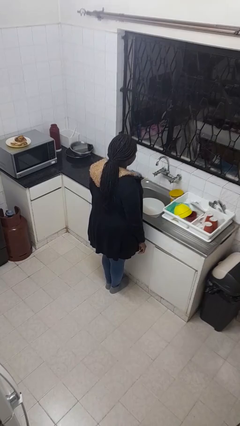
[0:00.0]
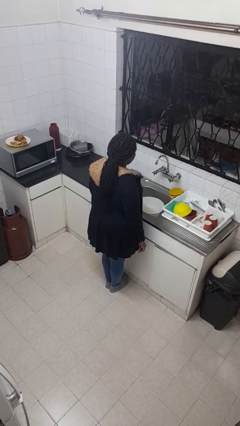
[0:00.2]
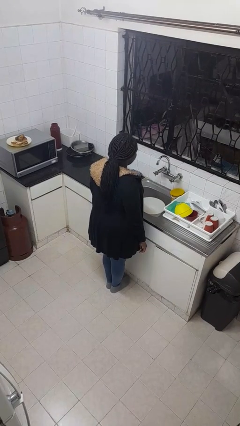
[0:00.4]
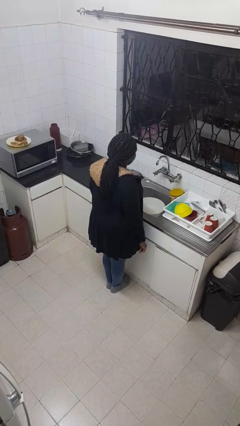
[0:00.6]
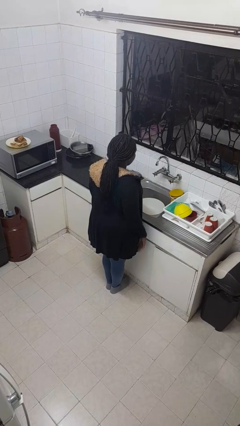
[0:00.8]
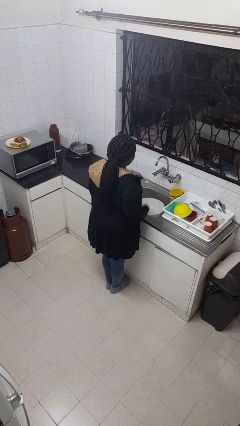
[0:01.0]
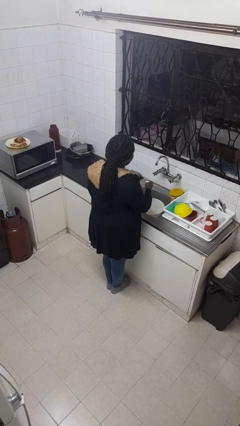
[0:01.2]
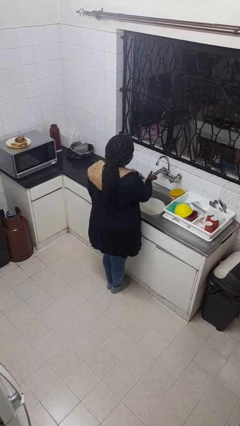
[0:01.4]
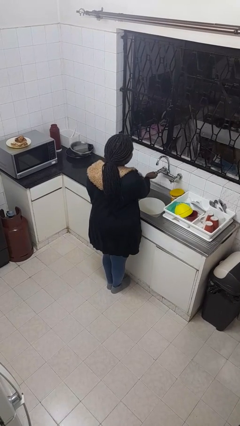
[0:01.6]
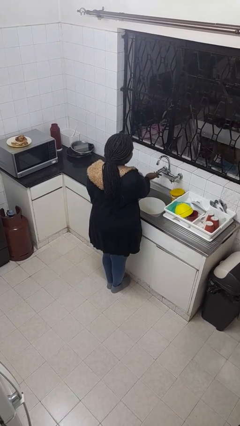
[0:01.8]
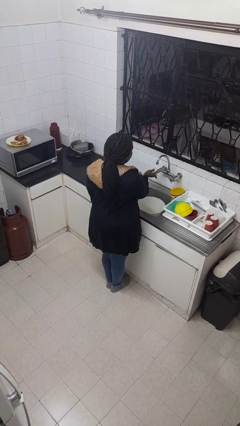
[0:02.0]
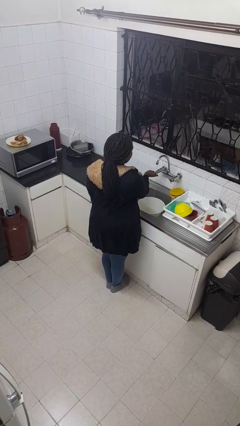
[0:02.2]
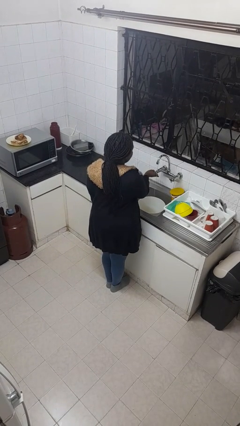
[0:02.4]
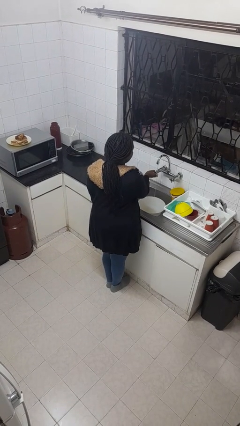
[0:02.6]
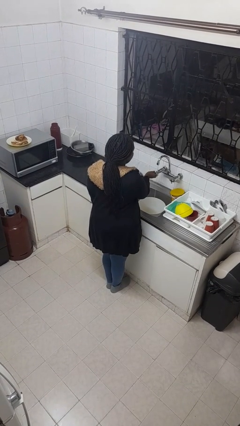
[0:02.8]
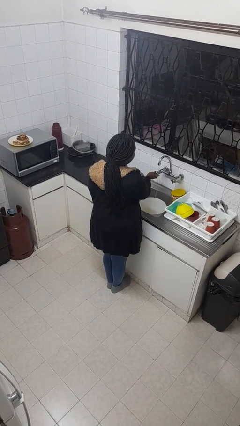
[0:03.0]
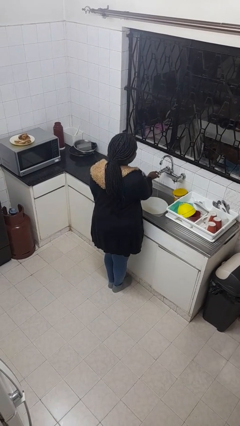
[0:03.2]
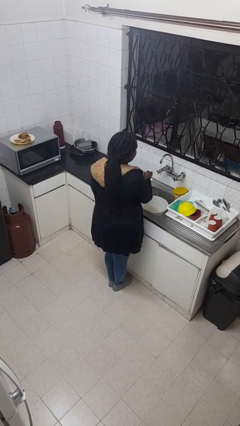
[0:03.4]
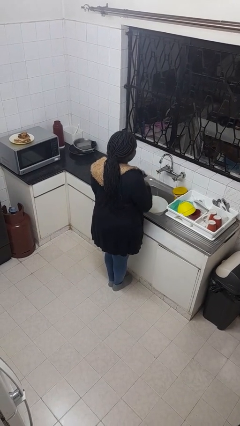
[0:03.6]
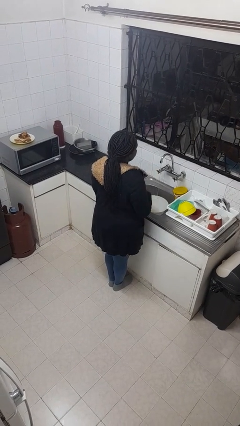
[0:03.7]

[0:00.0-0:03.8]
person turns on faucet

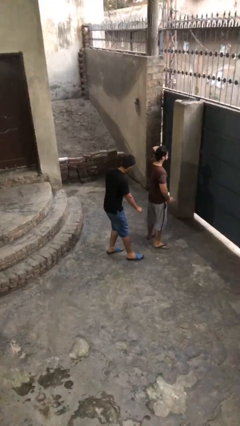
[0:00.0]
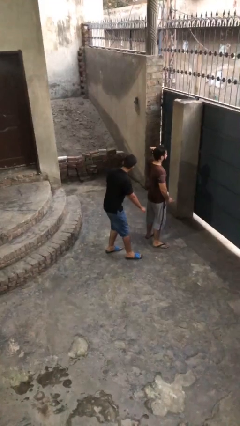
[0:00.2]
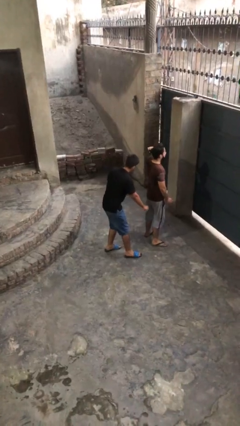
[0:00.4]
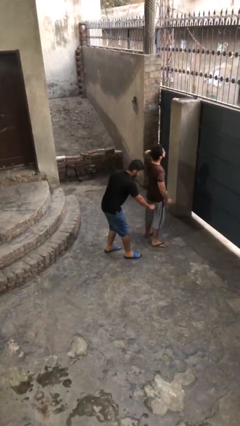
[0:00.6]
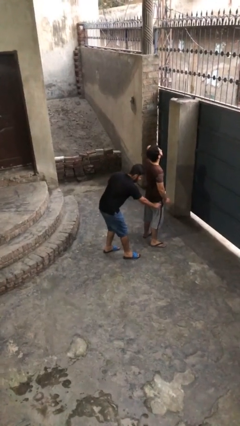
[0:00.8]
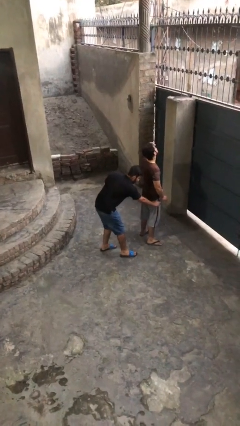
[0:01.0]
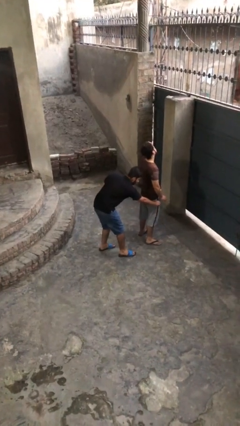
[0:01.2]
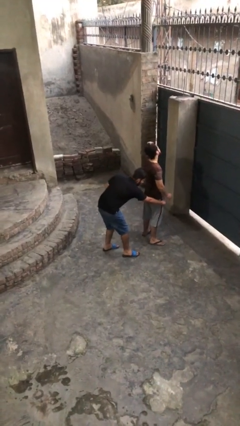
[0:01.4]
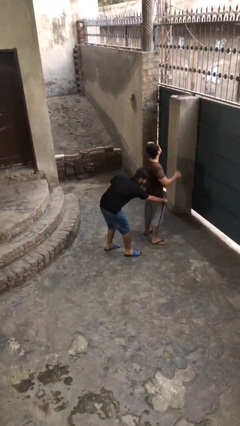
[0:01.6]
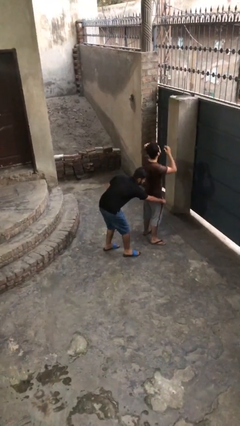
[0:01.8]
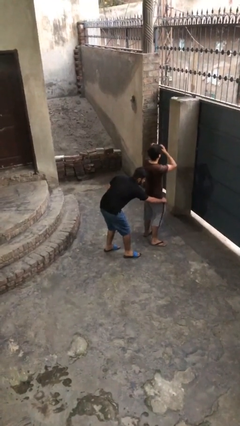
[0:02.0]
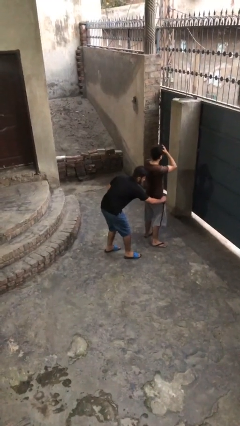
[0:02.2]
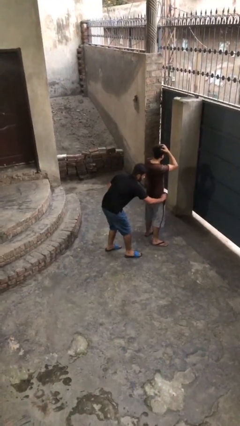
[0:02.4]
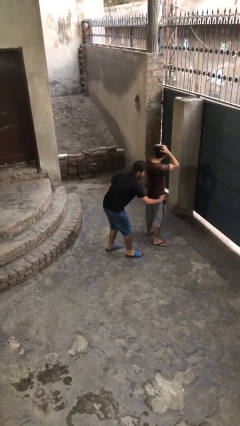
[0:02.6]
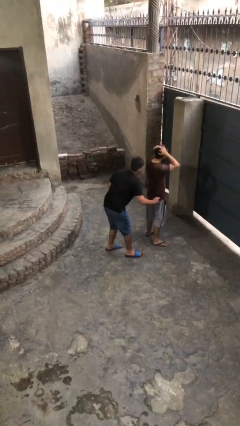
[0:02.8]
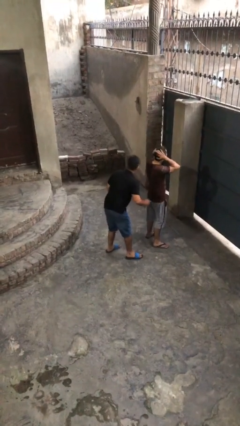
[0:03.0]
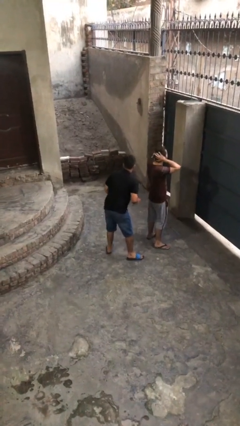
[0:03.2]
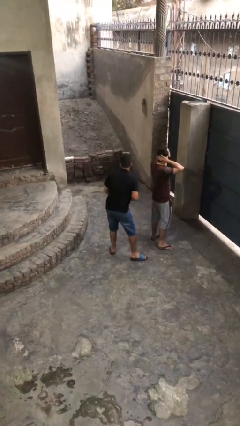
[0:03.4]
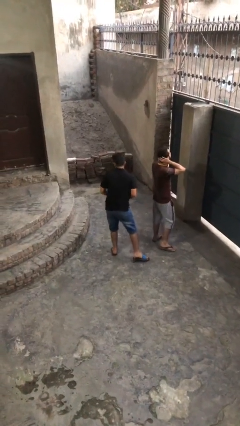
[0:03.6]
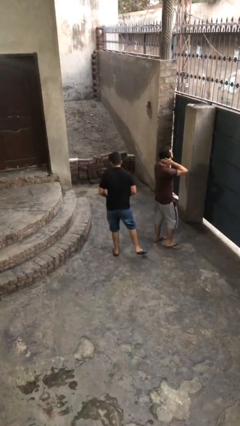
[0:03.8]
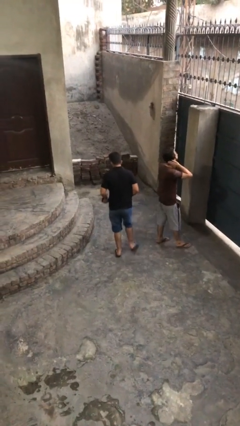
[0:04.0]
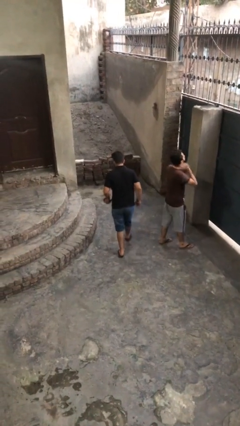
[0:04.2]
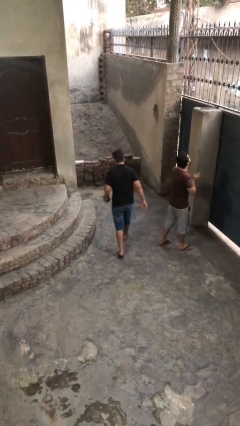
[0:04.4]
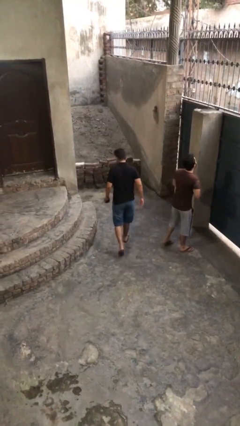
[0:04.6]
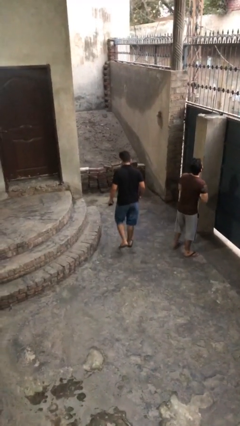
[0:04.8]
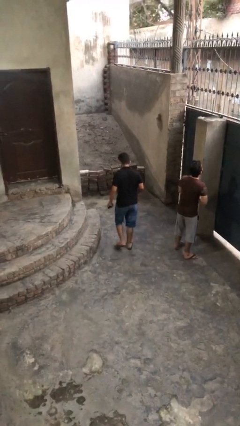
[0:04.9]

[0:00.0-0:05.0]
person steals object from person

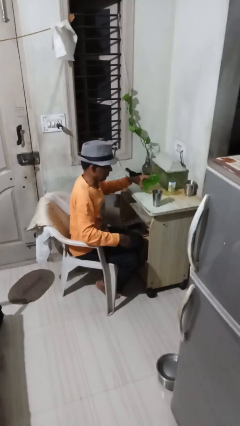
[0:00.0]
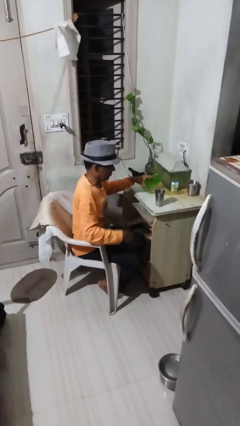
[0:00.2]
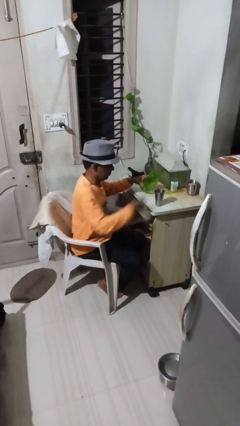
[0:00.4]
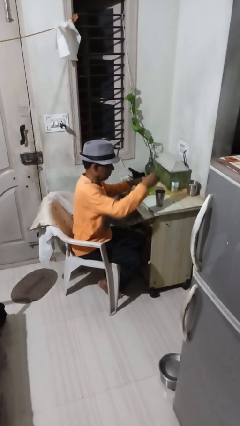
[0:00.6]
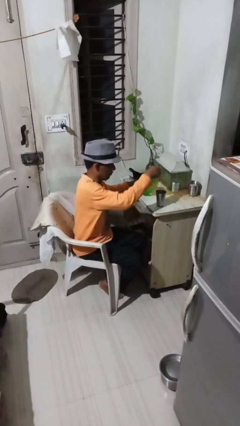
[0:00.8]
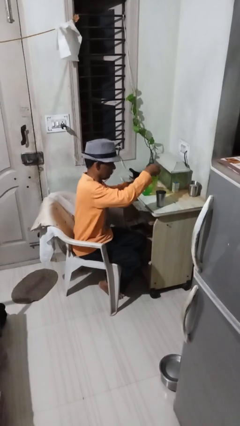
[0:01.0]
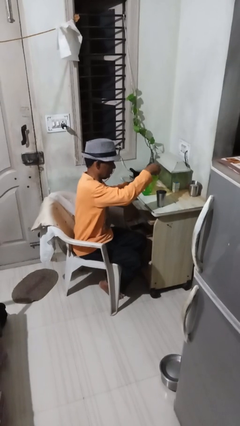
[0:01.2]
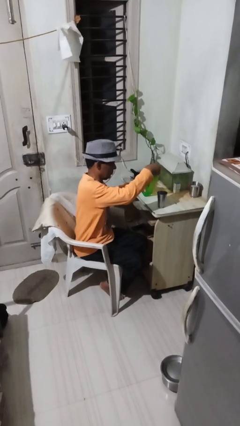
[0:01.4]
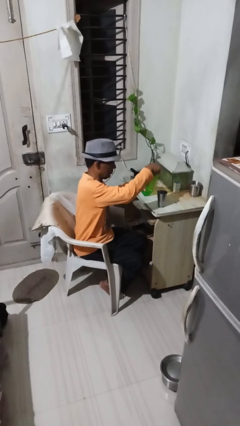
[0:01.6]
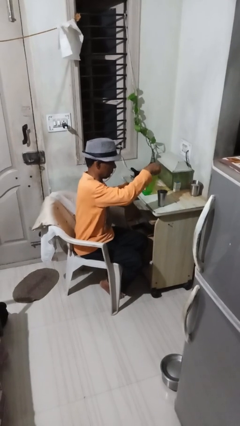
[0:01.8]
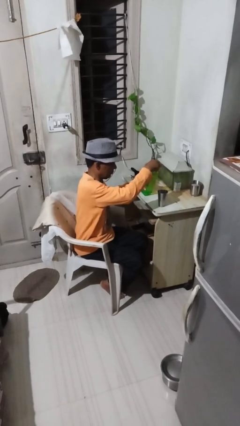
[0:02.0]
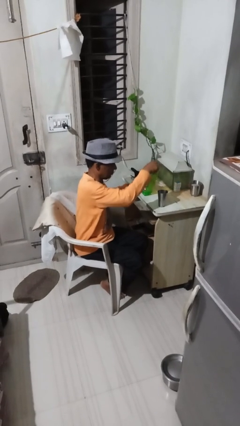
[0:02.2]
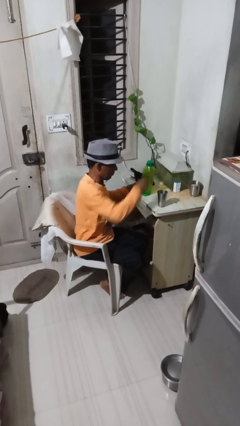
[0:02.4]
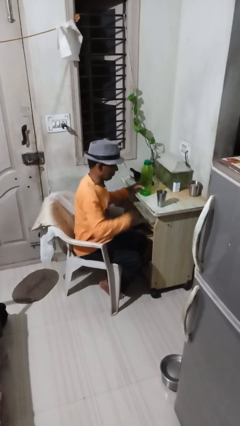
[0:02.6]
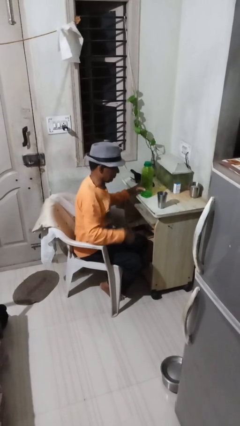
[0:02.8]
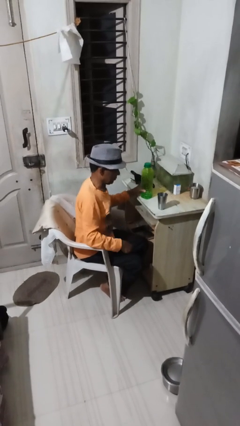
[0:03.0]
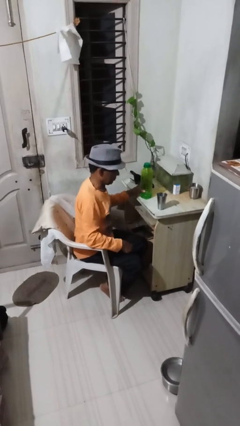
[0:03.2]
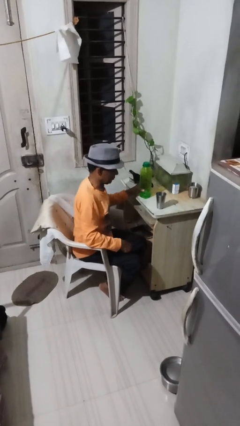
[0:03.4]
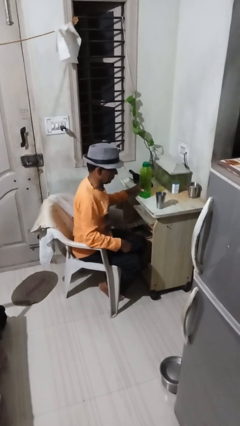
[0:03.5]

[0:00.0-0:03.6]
person screws lid to bottle

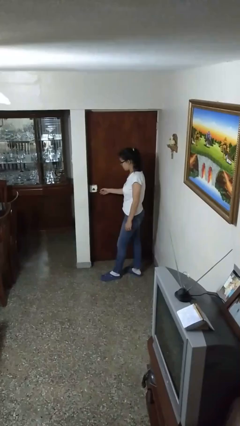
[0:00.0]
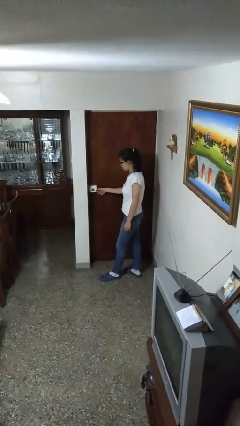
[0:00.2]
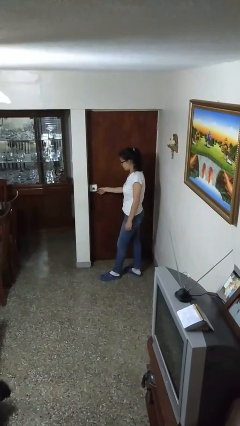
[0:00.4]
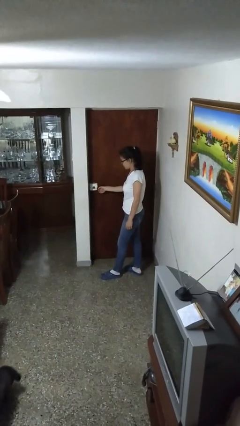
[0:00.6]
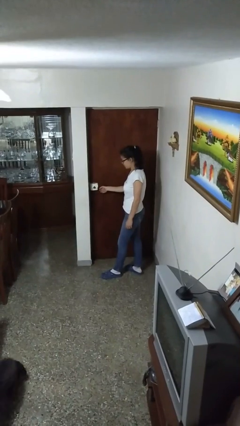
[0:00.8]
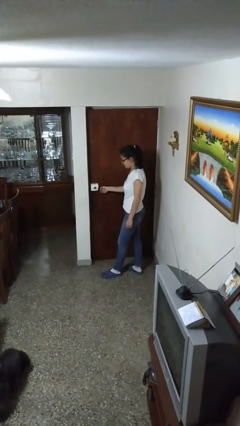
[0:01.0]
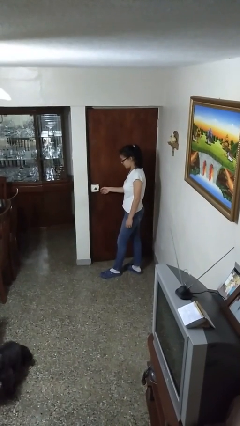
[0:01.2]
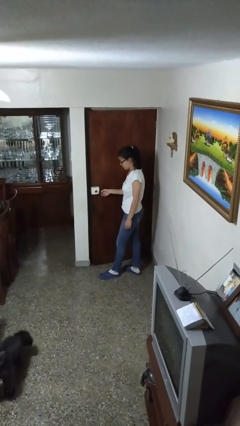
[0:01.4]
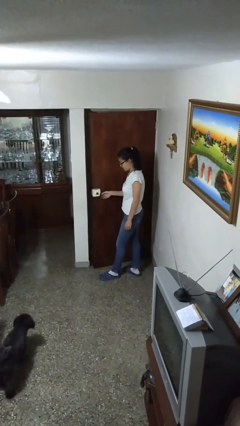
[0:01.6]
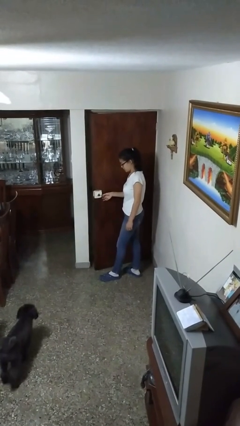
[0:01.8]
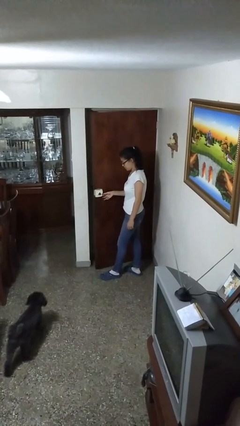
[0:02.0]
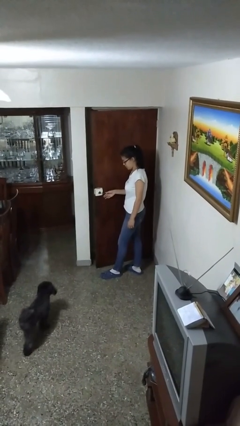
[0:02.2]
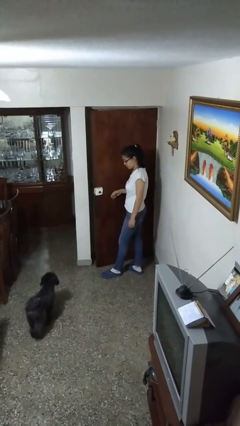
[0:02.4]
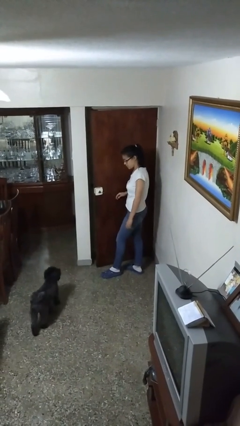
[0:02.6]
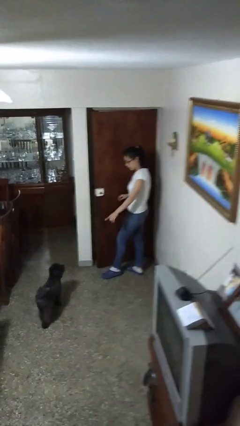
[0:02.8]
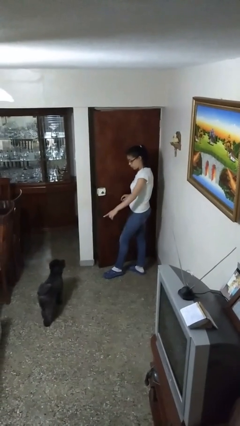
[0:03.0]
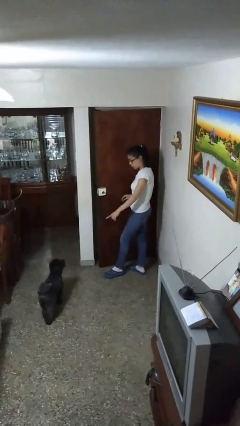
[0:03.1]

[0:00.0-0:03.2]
person opens facility door

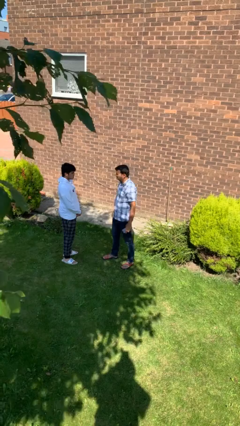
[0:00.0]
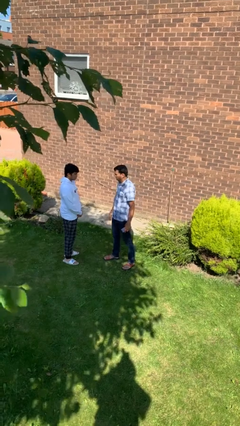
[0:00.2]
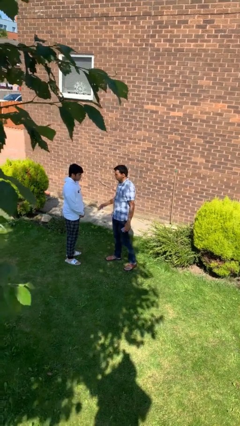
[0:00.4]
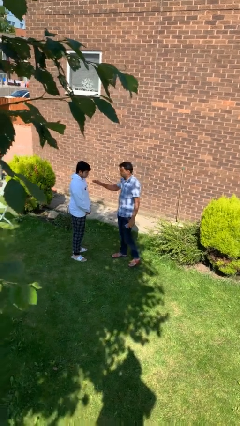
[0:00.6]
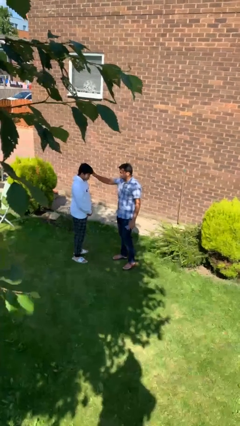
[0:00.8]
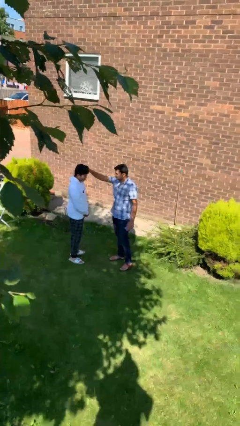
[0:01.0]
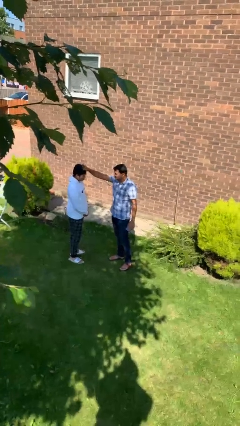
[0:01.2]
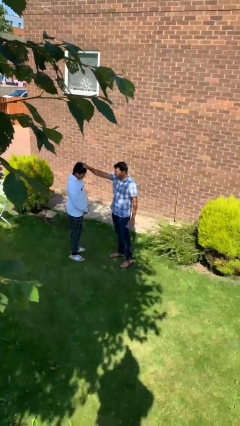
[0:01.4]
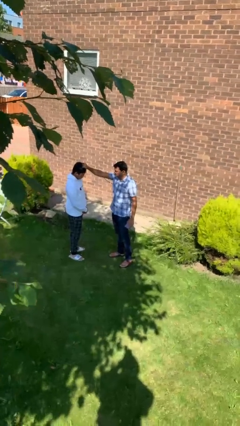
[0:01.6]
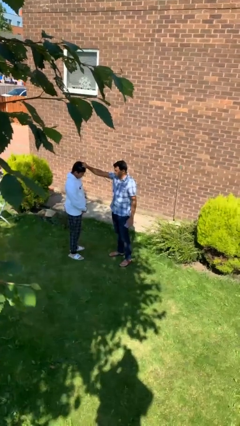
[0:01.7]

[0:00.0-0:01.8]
person grabs person by hair
